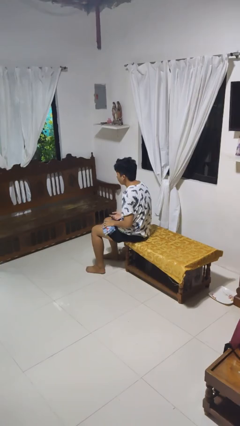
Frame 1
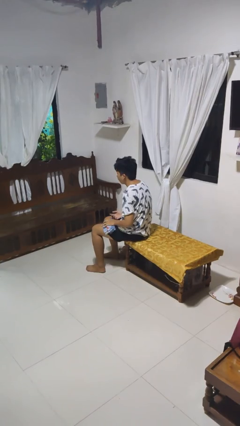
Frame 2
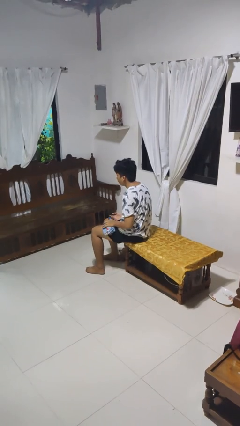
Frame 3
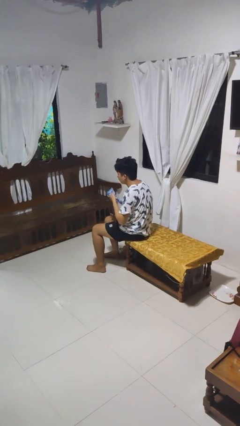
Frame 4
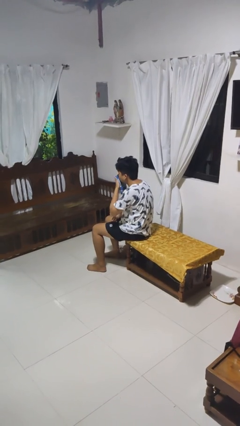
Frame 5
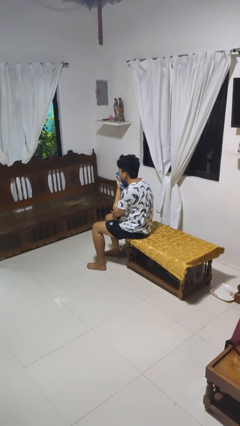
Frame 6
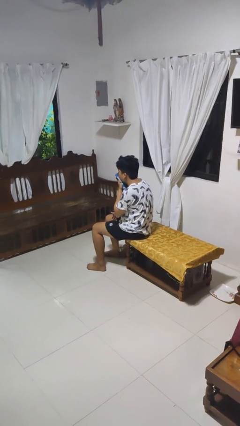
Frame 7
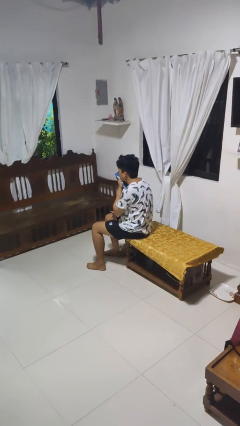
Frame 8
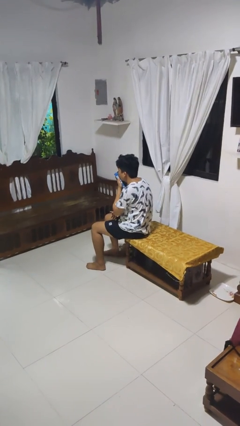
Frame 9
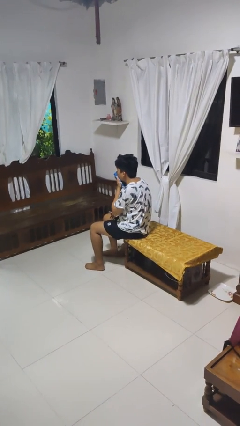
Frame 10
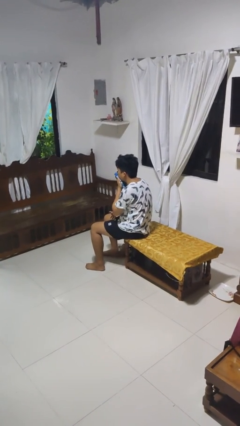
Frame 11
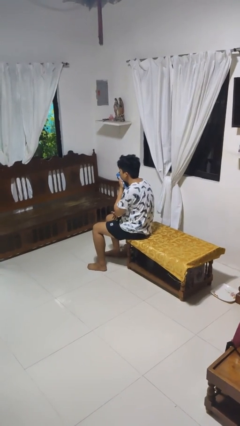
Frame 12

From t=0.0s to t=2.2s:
person blows nose

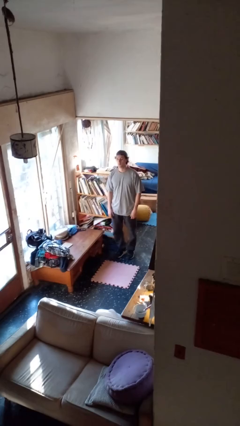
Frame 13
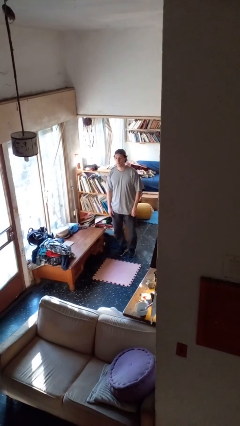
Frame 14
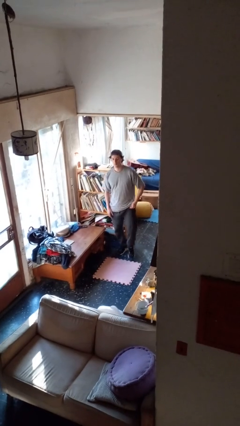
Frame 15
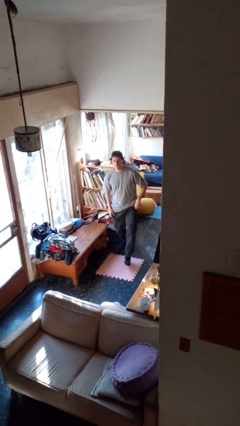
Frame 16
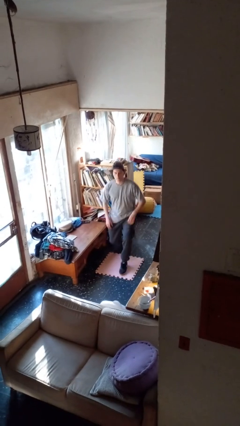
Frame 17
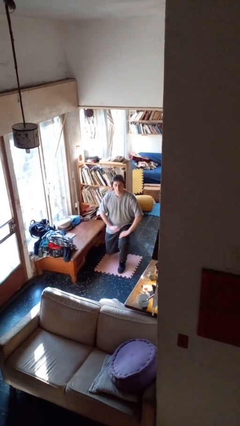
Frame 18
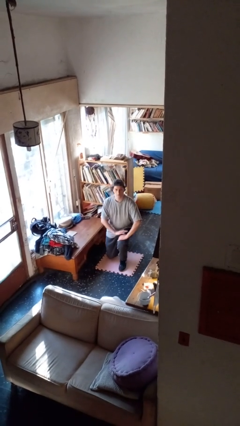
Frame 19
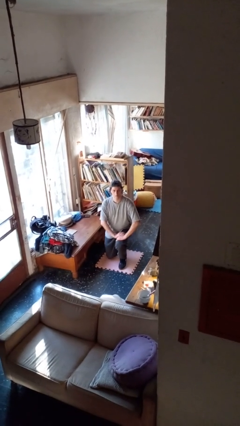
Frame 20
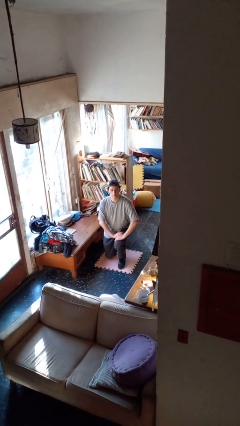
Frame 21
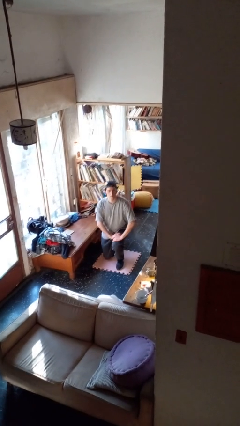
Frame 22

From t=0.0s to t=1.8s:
person kneels

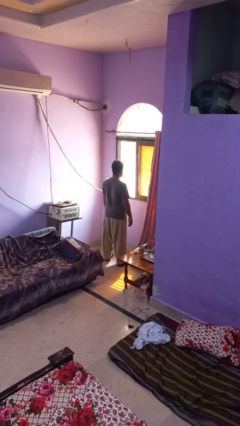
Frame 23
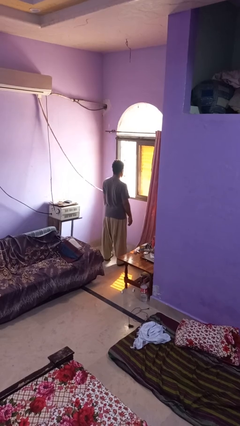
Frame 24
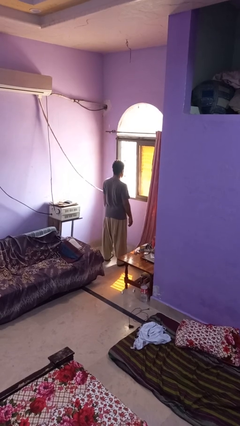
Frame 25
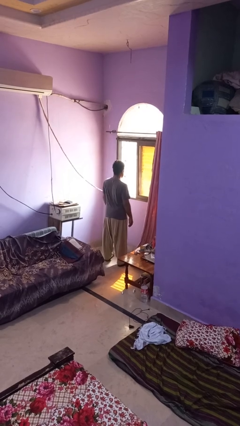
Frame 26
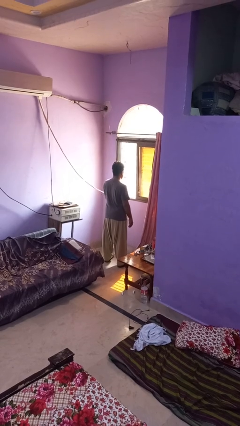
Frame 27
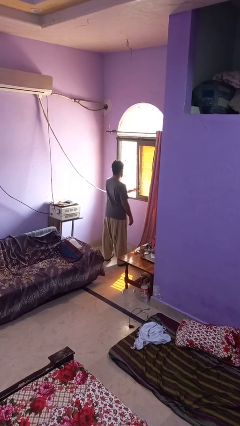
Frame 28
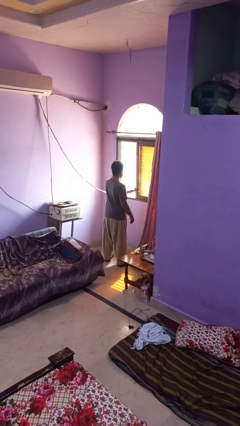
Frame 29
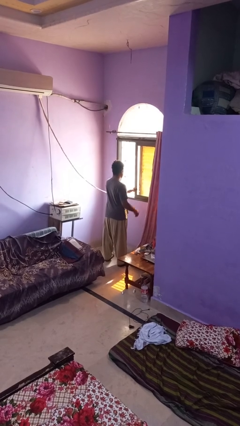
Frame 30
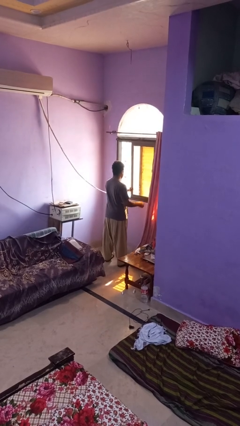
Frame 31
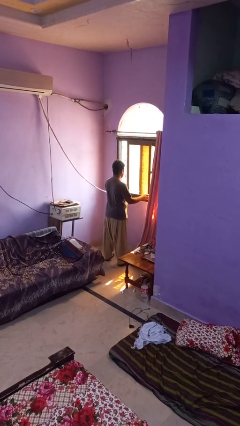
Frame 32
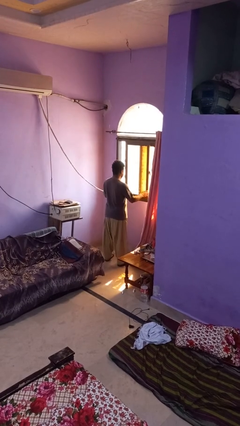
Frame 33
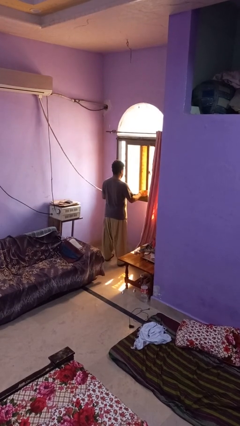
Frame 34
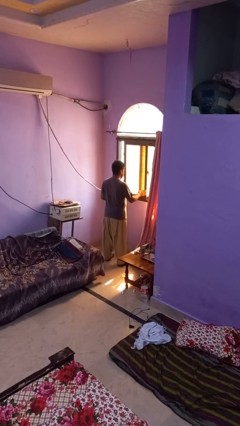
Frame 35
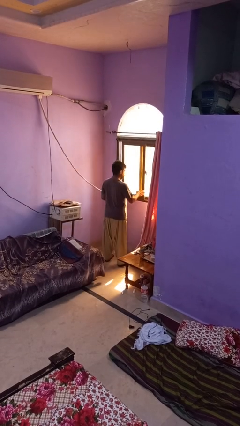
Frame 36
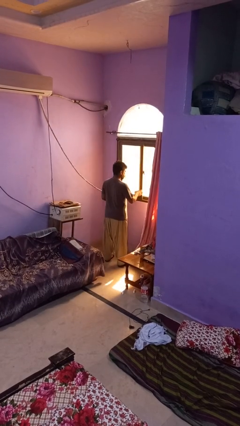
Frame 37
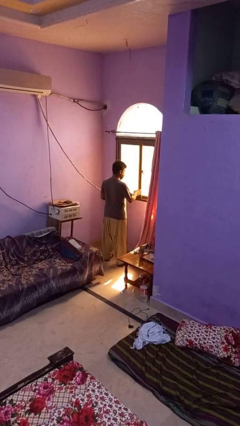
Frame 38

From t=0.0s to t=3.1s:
person closes home window

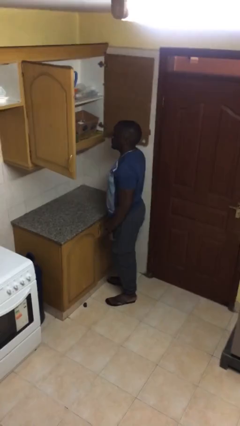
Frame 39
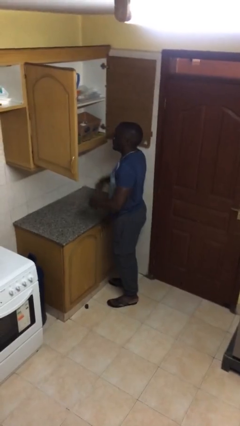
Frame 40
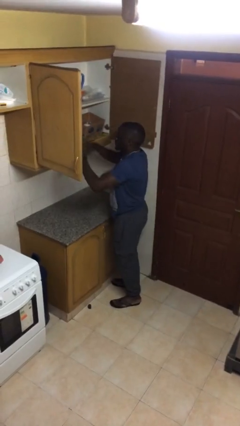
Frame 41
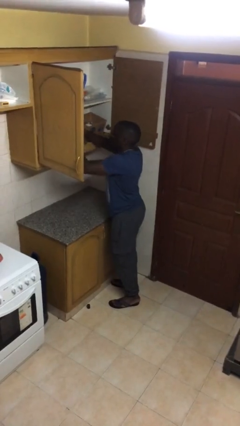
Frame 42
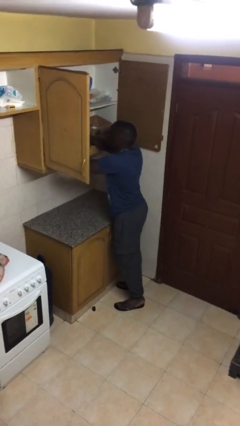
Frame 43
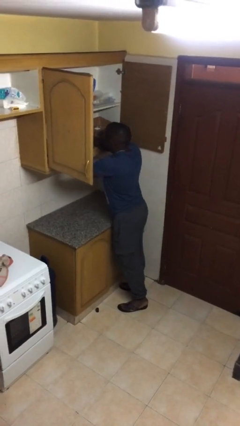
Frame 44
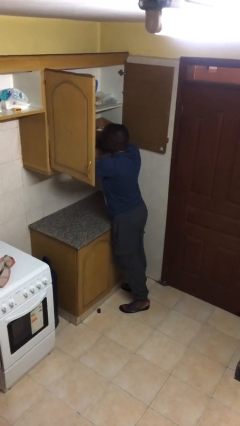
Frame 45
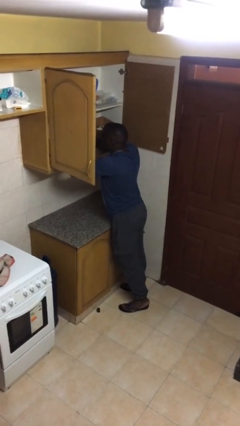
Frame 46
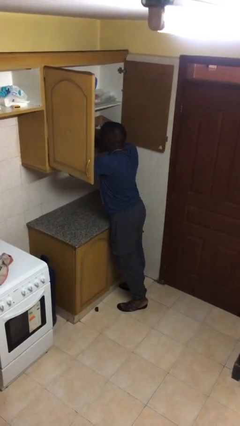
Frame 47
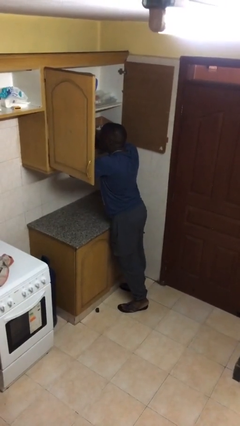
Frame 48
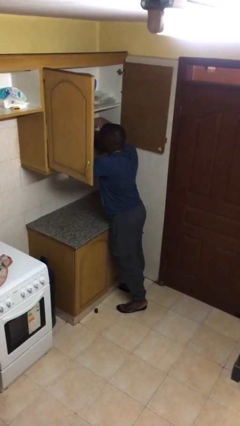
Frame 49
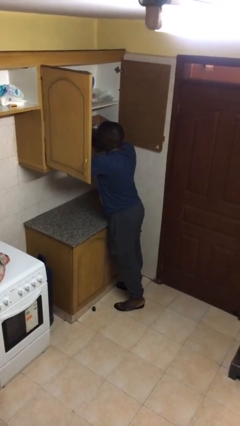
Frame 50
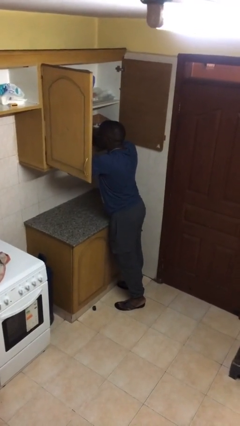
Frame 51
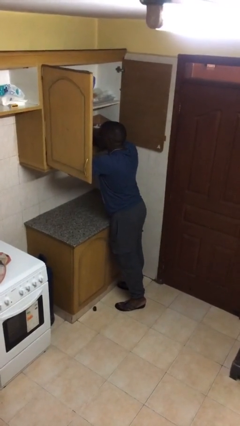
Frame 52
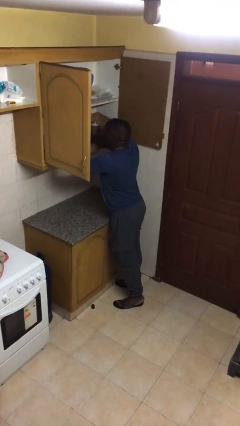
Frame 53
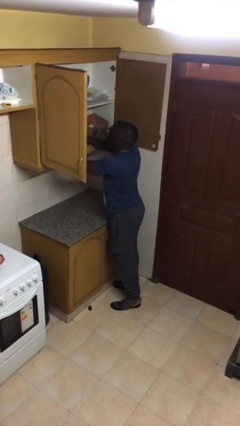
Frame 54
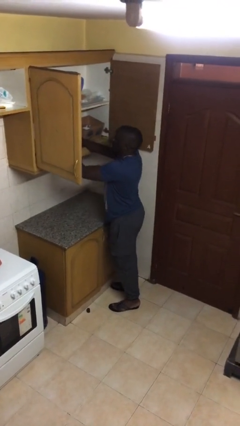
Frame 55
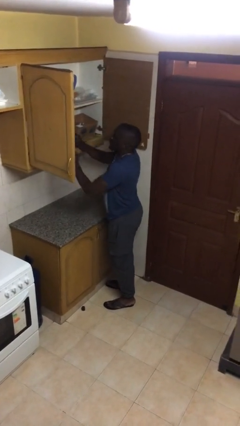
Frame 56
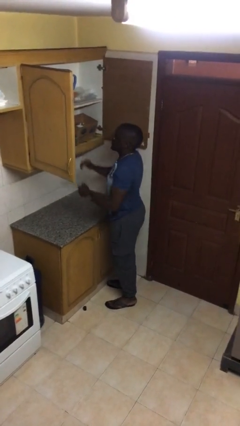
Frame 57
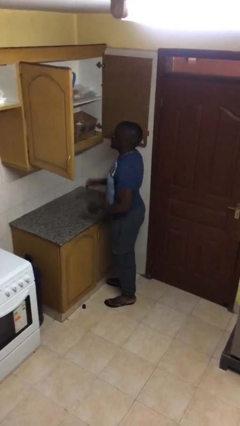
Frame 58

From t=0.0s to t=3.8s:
person searches in cabinet

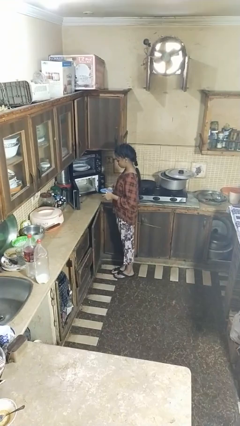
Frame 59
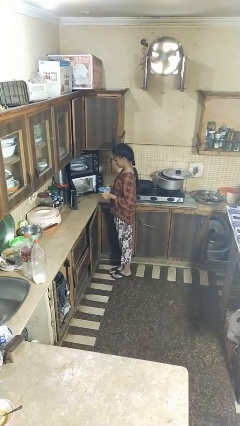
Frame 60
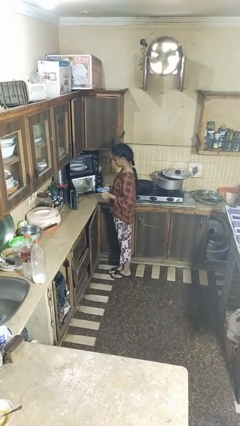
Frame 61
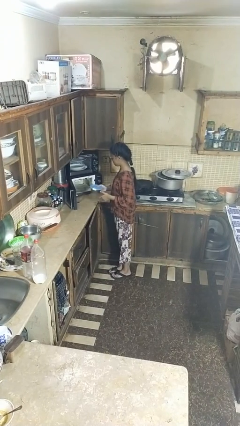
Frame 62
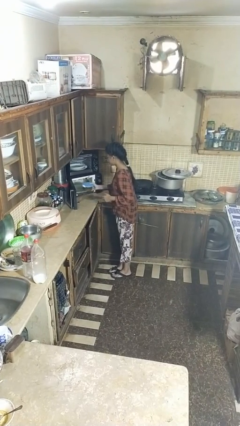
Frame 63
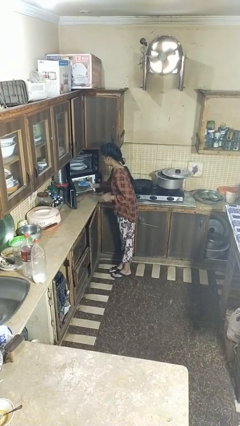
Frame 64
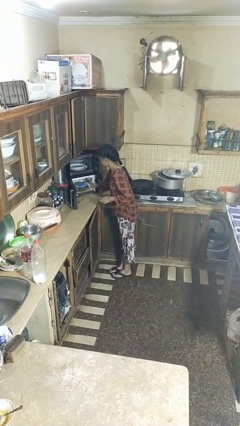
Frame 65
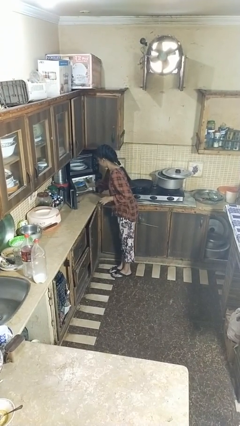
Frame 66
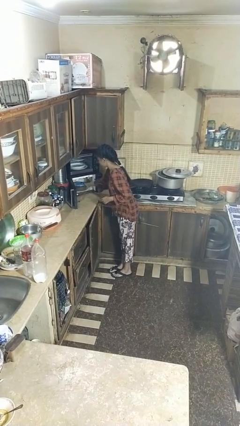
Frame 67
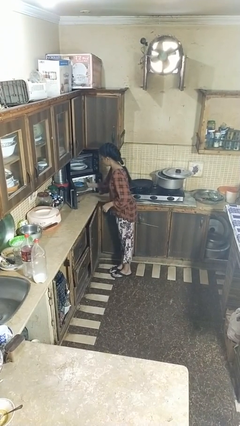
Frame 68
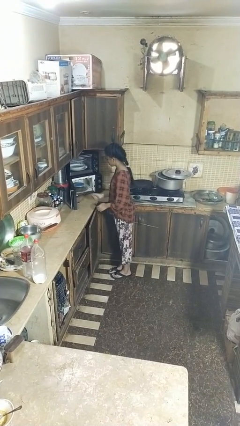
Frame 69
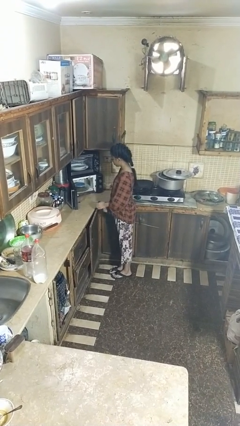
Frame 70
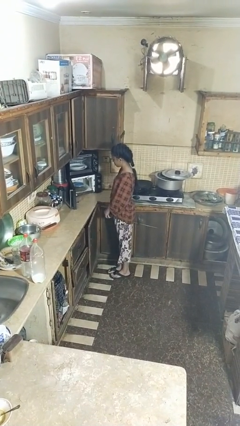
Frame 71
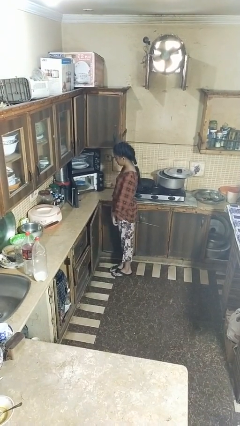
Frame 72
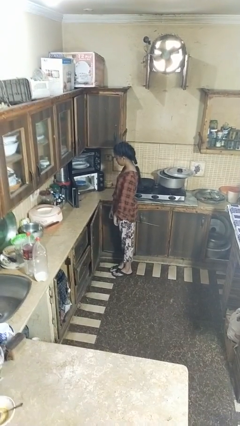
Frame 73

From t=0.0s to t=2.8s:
person puts object into microwave

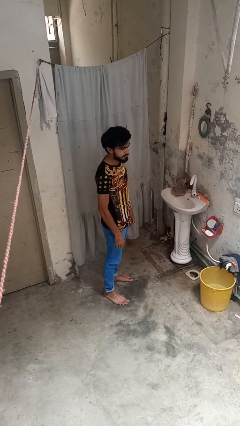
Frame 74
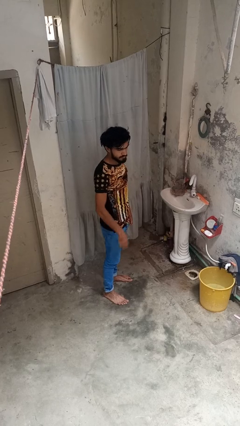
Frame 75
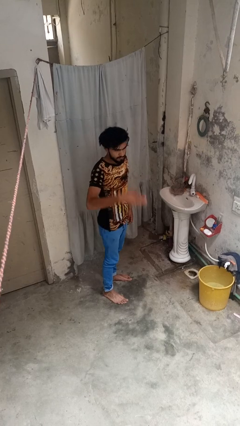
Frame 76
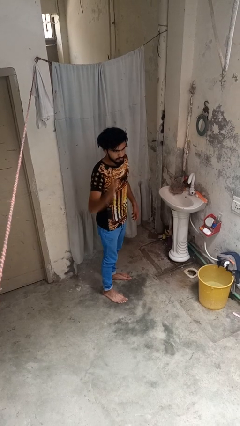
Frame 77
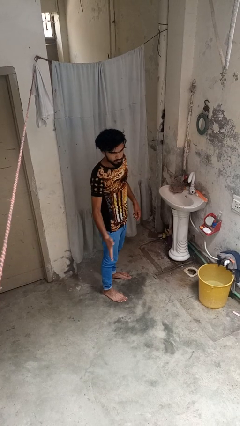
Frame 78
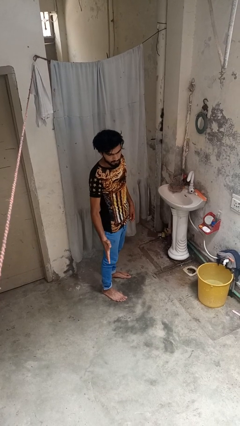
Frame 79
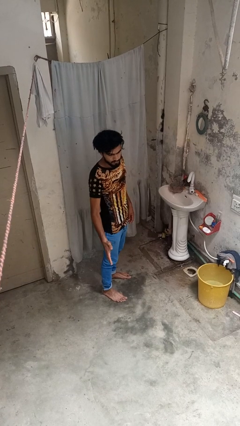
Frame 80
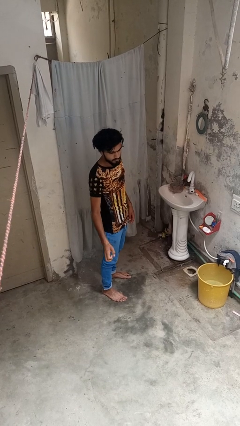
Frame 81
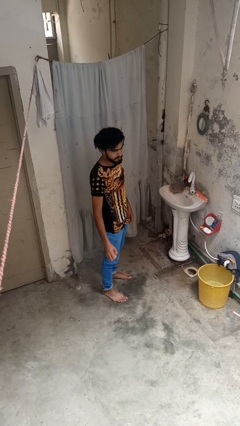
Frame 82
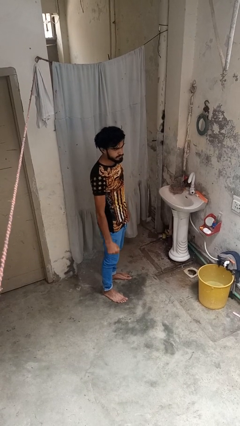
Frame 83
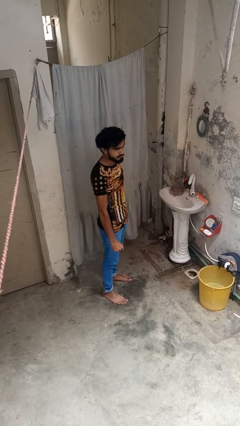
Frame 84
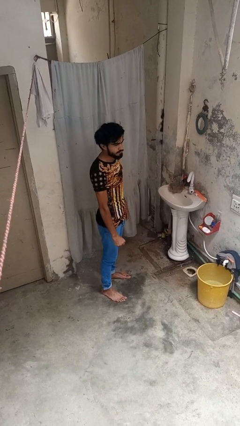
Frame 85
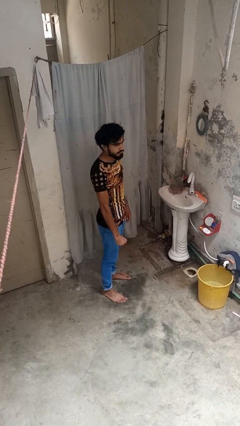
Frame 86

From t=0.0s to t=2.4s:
person karate chop

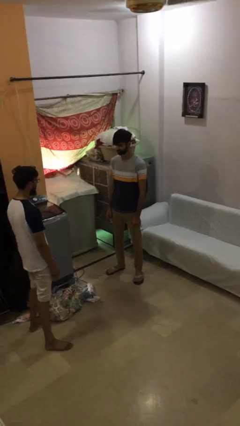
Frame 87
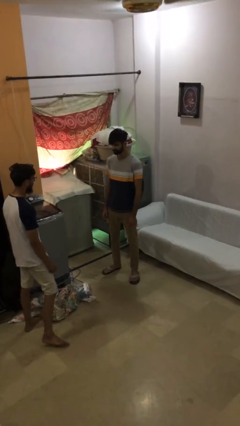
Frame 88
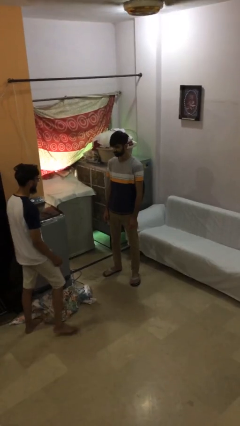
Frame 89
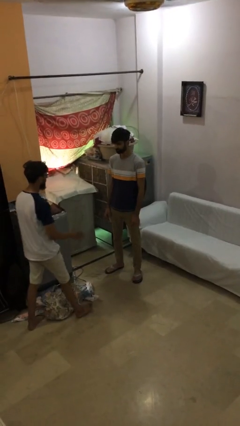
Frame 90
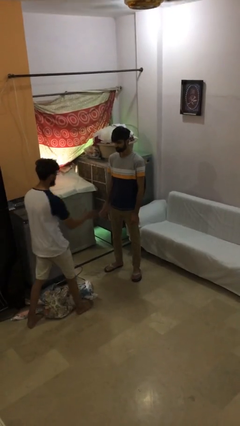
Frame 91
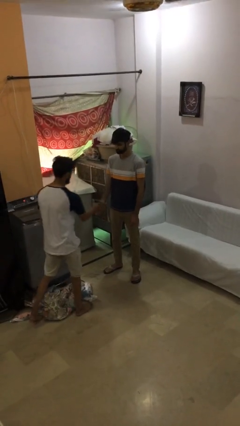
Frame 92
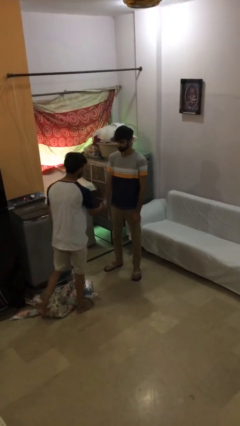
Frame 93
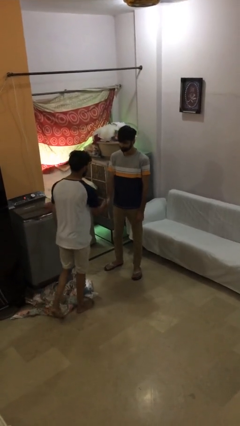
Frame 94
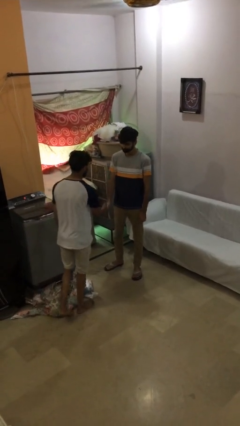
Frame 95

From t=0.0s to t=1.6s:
person shakes hand

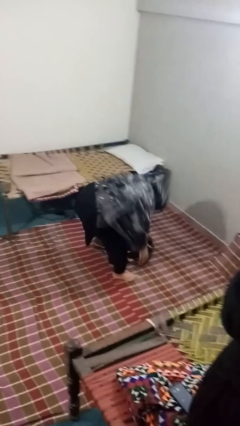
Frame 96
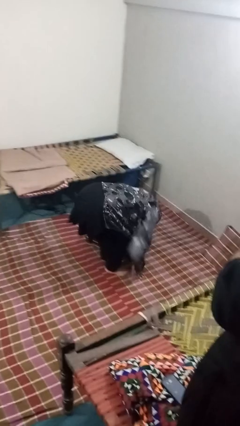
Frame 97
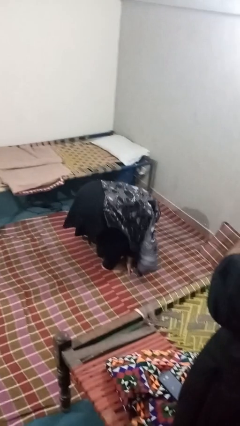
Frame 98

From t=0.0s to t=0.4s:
person stands up from floor
